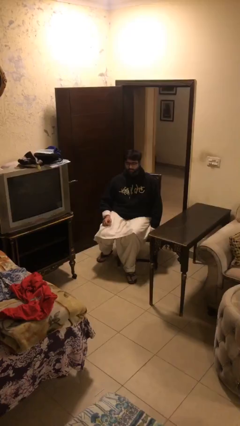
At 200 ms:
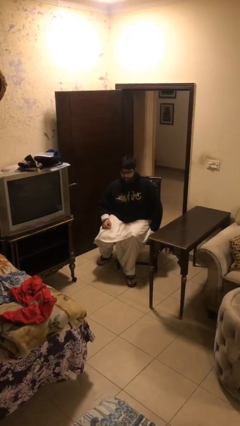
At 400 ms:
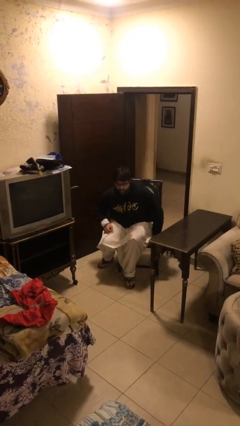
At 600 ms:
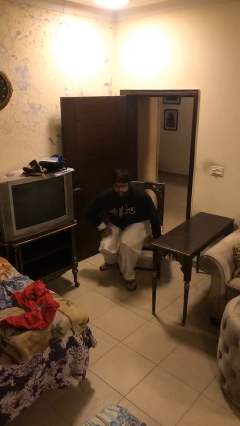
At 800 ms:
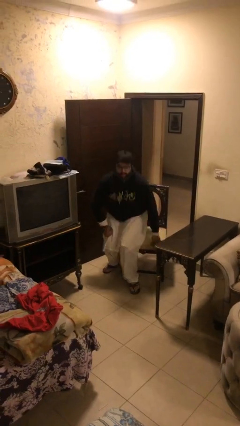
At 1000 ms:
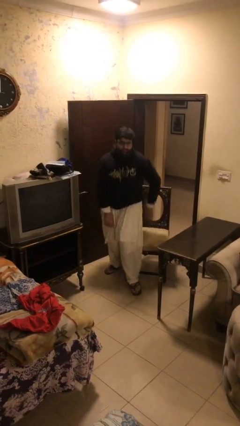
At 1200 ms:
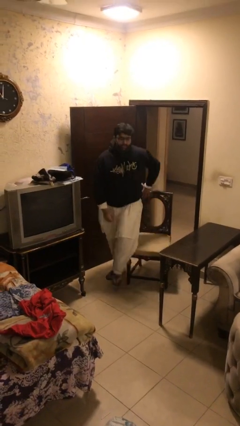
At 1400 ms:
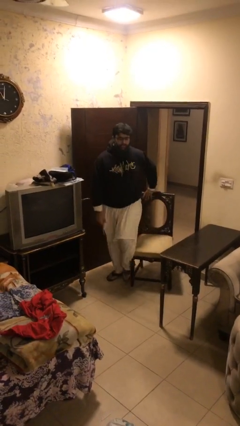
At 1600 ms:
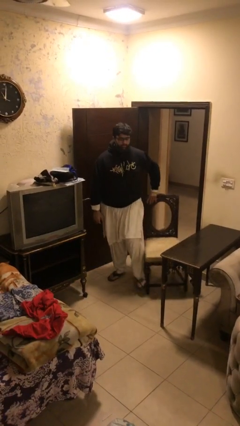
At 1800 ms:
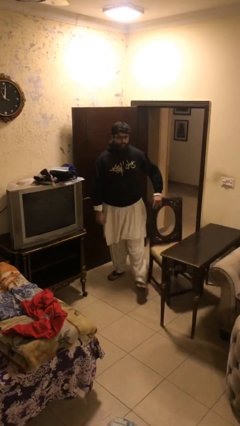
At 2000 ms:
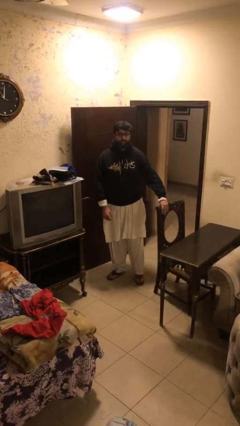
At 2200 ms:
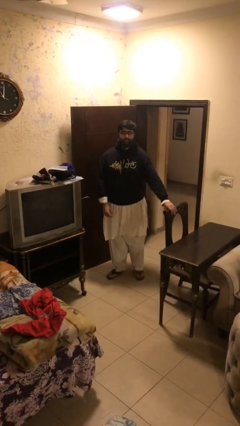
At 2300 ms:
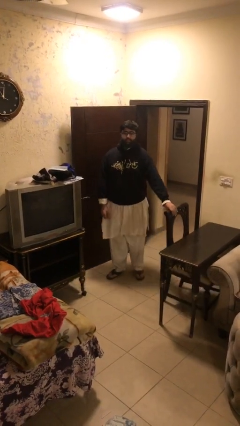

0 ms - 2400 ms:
person stands up

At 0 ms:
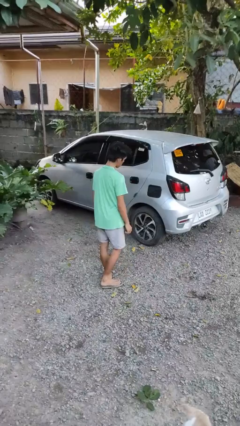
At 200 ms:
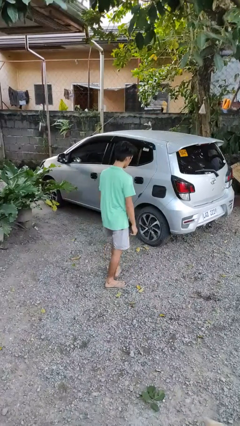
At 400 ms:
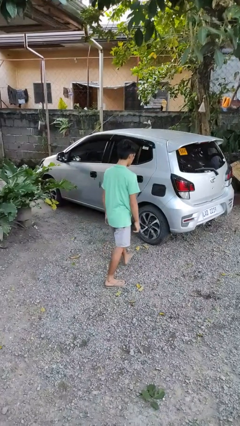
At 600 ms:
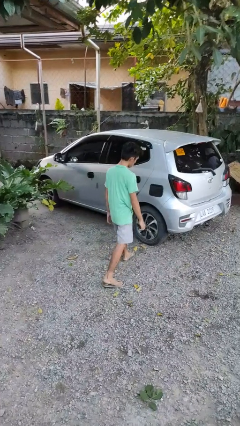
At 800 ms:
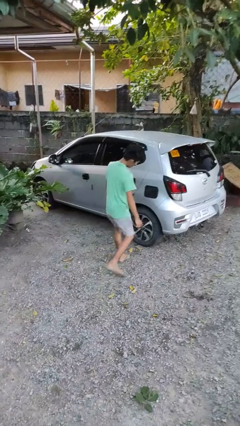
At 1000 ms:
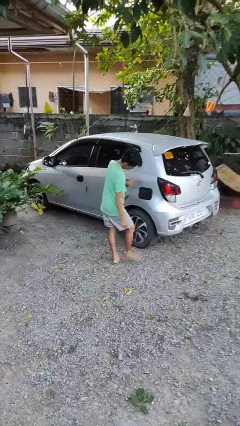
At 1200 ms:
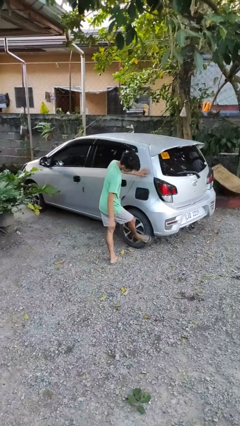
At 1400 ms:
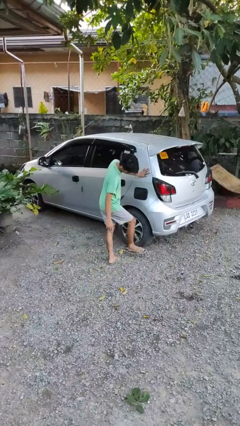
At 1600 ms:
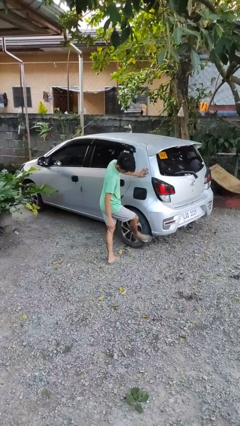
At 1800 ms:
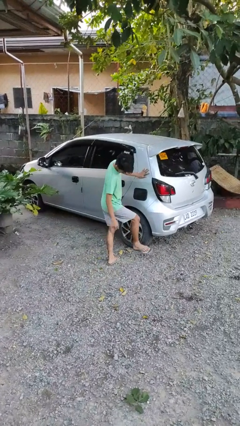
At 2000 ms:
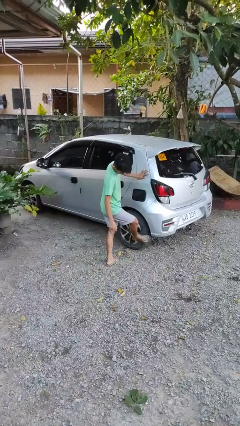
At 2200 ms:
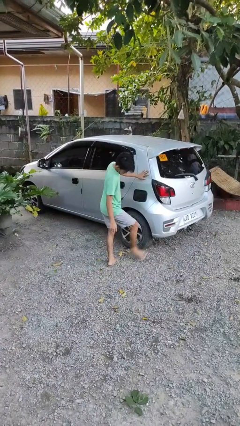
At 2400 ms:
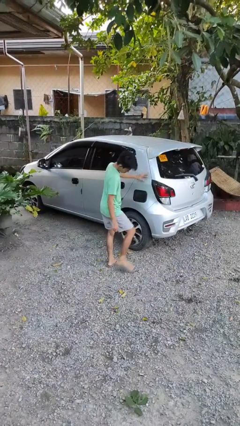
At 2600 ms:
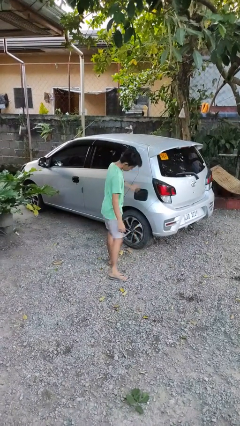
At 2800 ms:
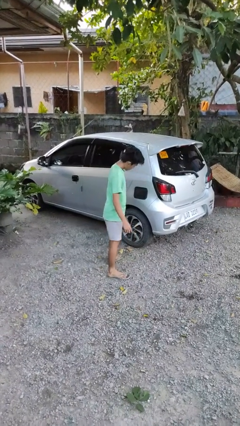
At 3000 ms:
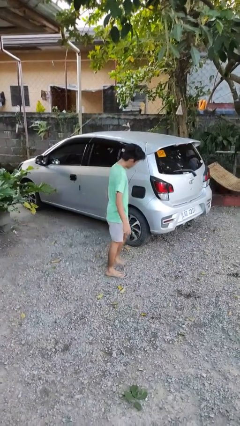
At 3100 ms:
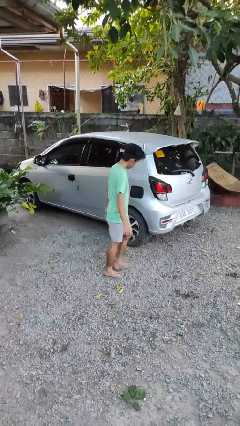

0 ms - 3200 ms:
person kicks car tires

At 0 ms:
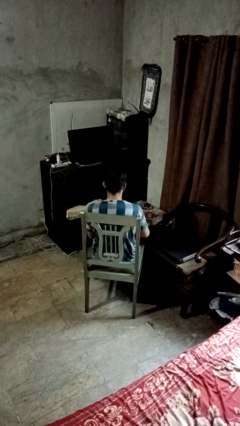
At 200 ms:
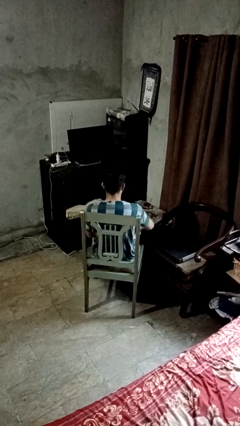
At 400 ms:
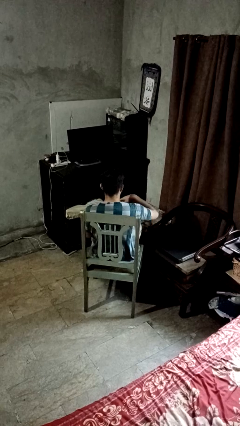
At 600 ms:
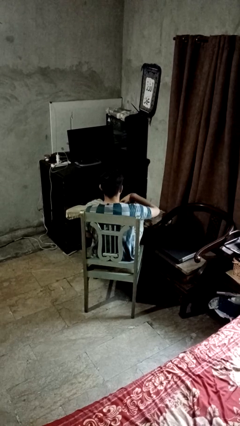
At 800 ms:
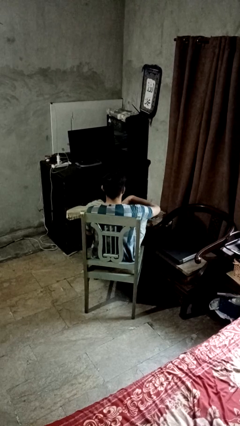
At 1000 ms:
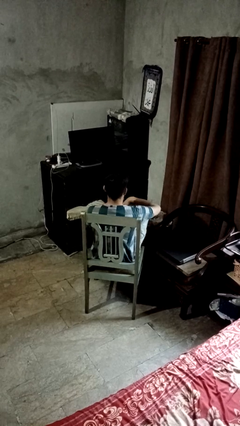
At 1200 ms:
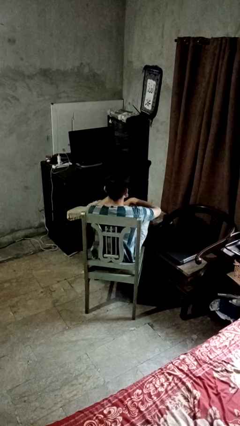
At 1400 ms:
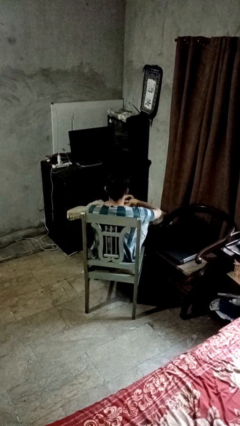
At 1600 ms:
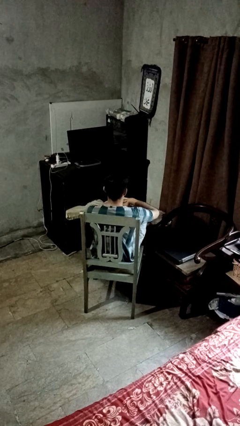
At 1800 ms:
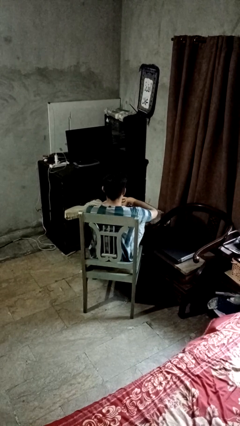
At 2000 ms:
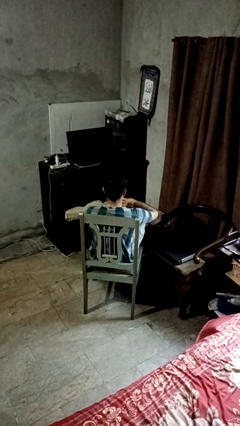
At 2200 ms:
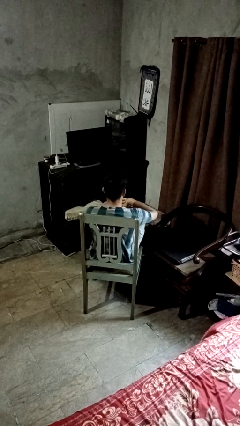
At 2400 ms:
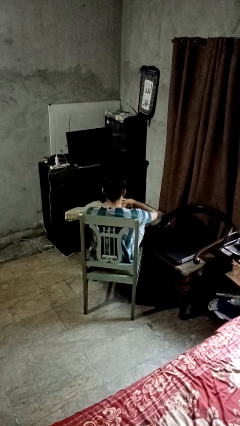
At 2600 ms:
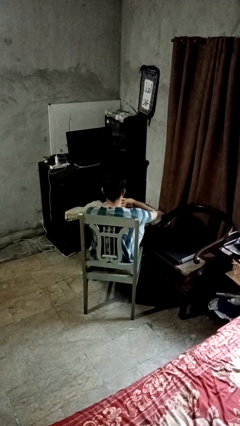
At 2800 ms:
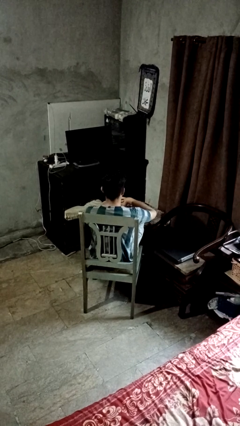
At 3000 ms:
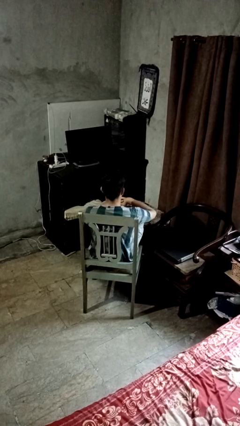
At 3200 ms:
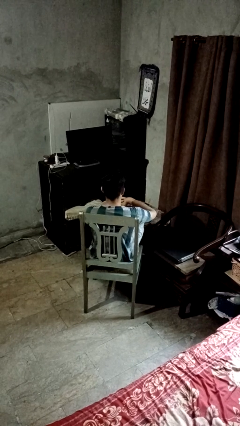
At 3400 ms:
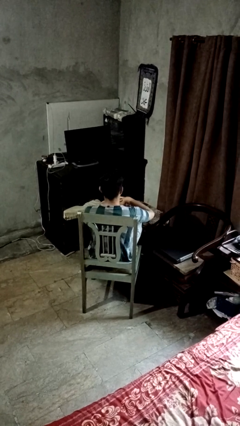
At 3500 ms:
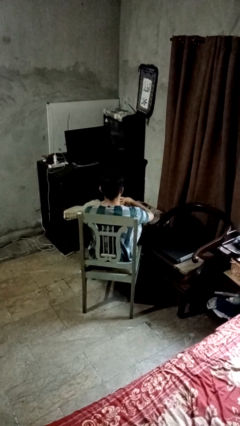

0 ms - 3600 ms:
person puts feet up

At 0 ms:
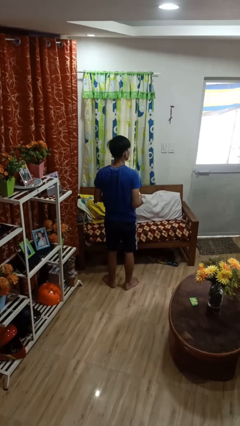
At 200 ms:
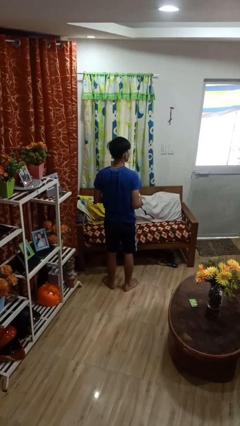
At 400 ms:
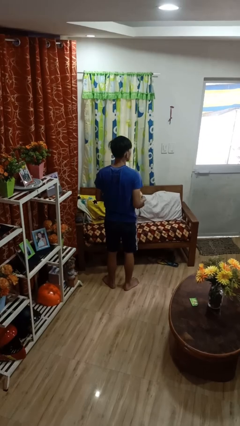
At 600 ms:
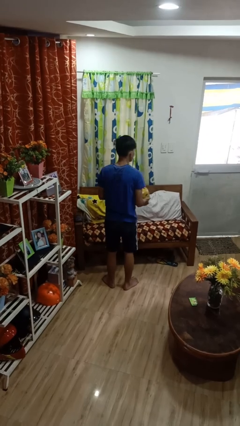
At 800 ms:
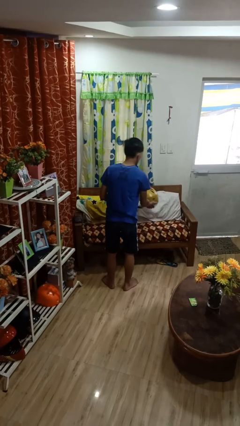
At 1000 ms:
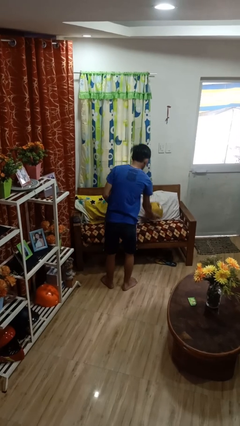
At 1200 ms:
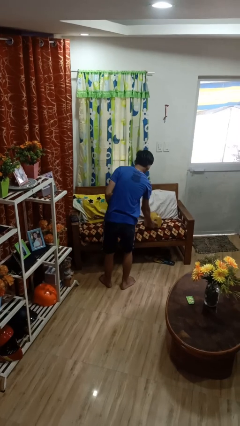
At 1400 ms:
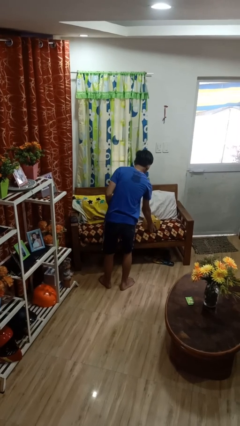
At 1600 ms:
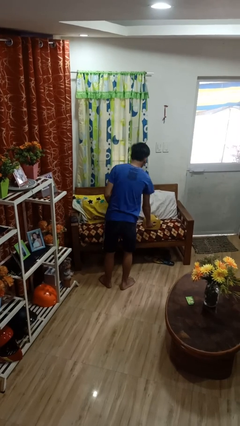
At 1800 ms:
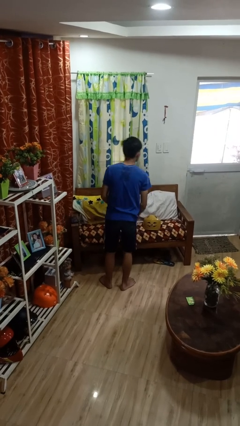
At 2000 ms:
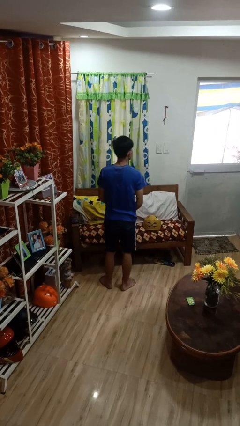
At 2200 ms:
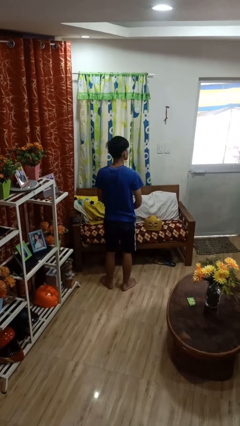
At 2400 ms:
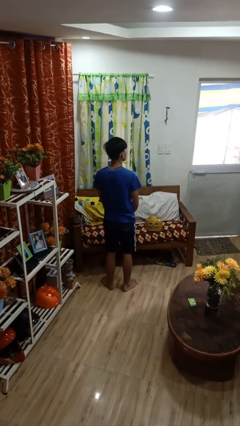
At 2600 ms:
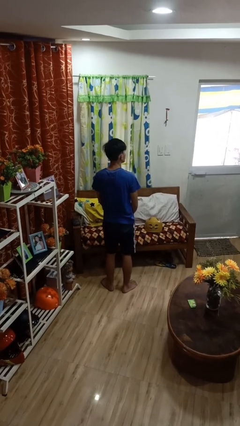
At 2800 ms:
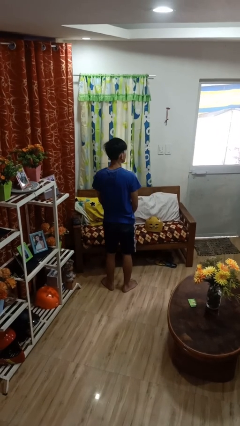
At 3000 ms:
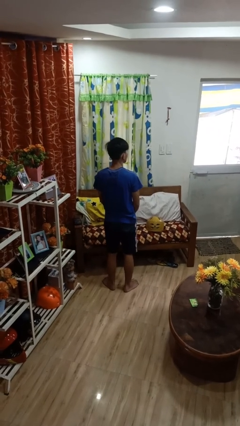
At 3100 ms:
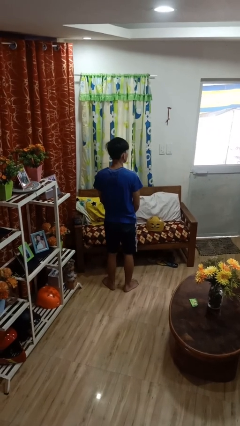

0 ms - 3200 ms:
person puts down object on couch

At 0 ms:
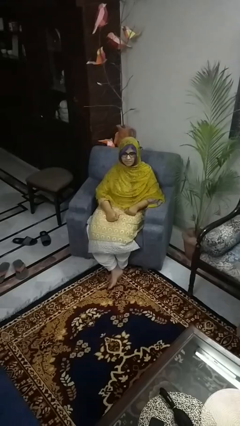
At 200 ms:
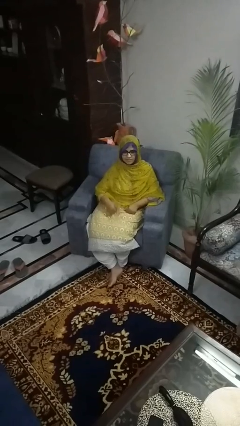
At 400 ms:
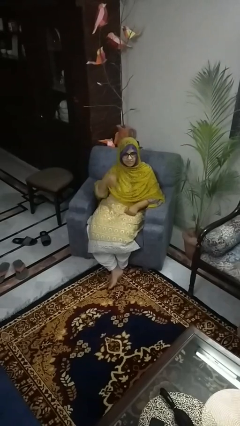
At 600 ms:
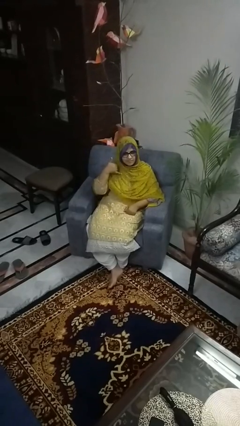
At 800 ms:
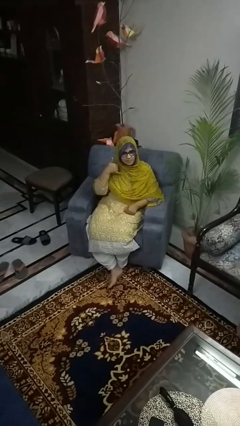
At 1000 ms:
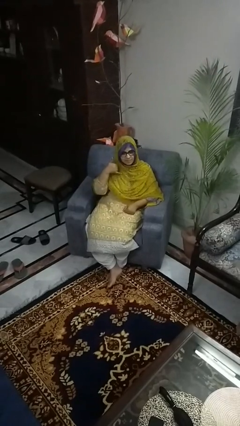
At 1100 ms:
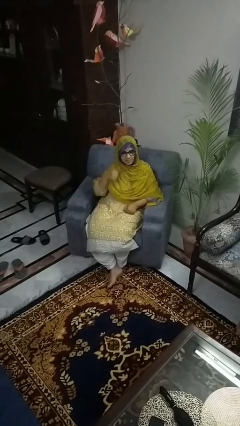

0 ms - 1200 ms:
person gestures call me

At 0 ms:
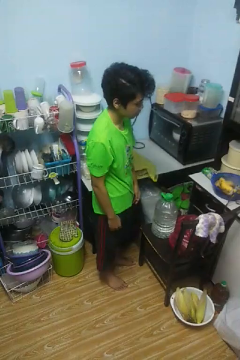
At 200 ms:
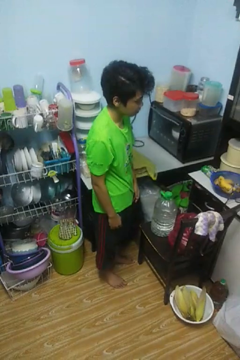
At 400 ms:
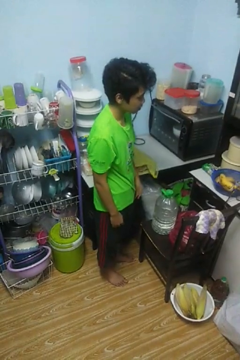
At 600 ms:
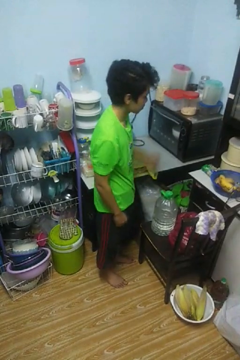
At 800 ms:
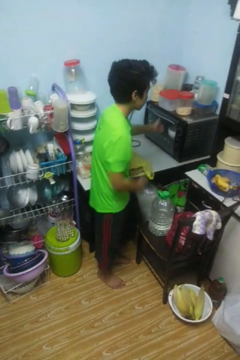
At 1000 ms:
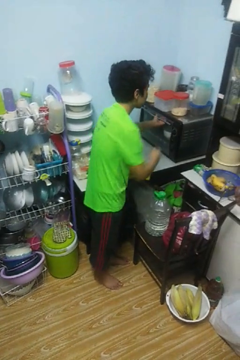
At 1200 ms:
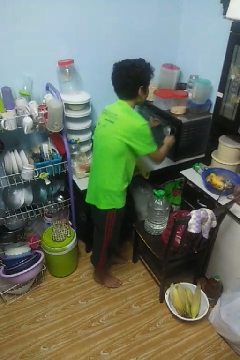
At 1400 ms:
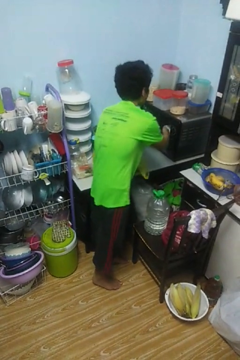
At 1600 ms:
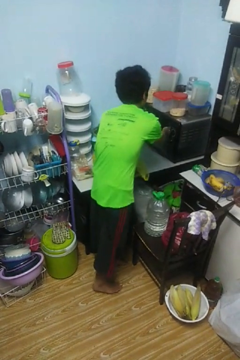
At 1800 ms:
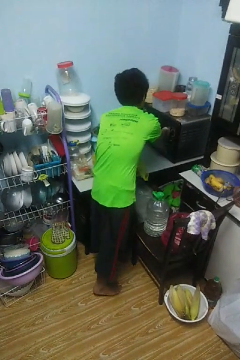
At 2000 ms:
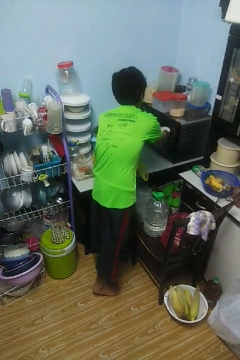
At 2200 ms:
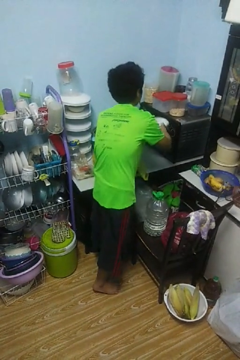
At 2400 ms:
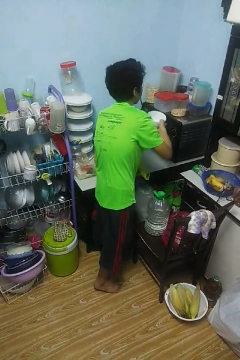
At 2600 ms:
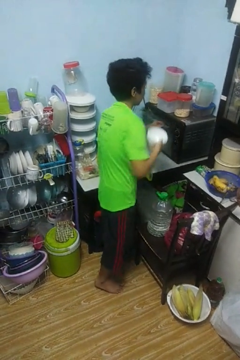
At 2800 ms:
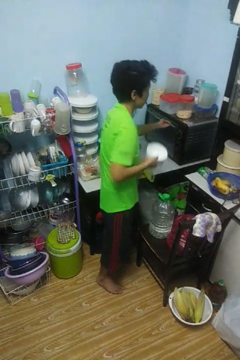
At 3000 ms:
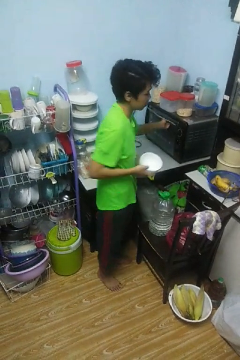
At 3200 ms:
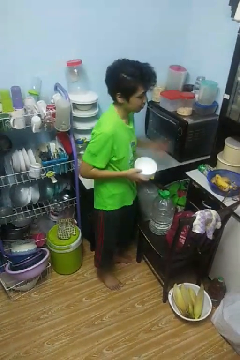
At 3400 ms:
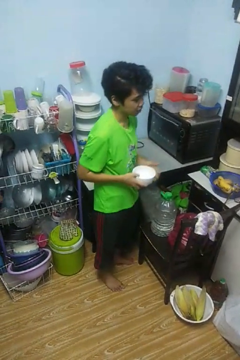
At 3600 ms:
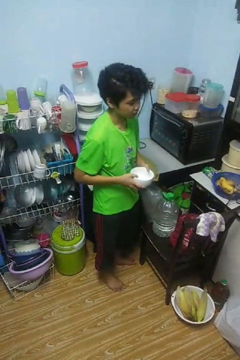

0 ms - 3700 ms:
person takes object from microwave

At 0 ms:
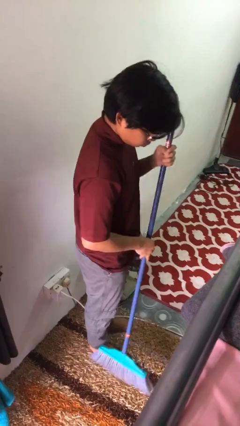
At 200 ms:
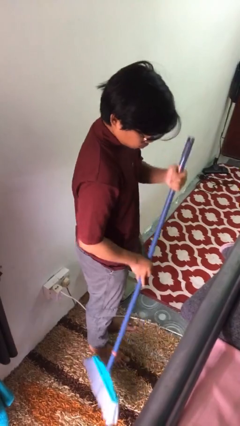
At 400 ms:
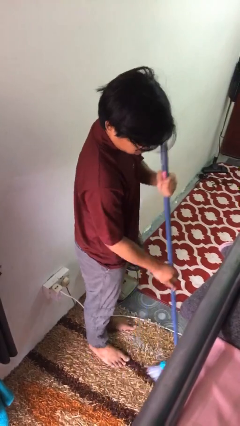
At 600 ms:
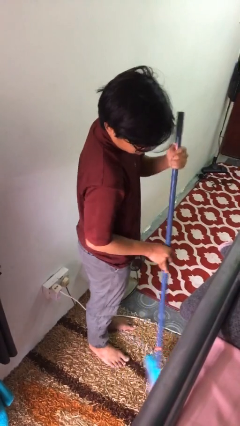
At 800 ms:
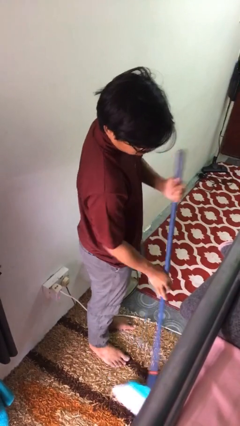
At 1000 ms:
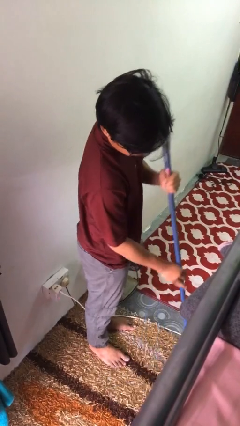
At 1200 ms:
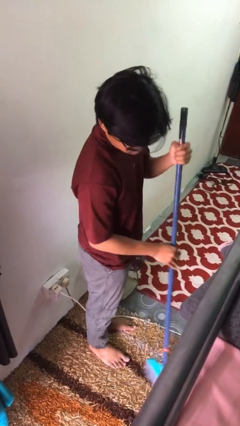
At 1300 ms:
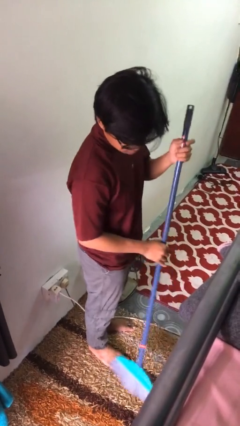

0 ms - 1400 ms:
person sweeps floor
